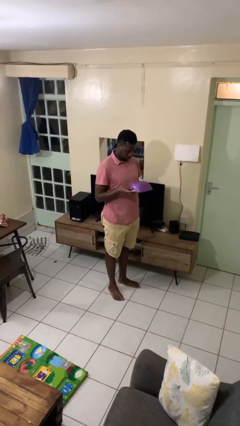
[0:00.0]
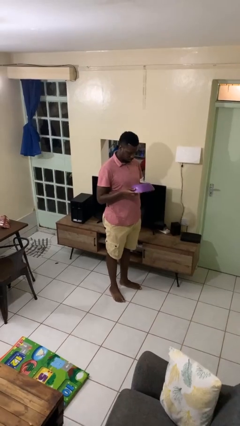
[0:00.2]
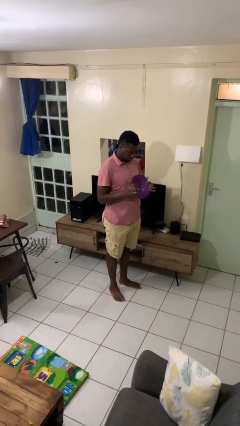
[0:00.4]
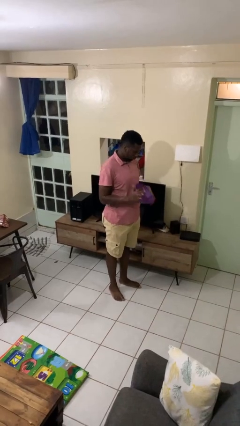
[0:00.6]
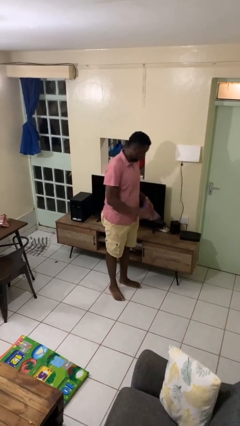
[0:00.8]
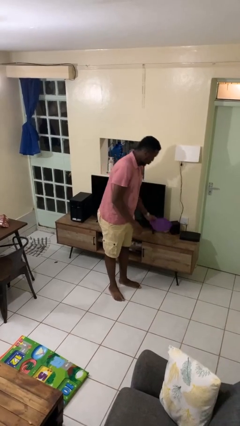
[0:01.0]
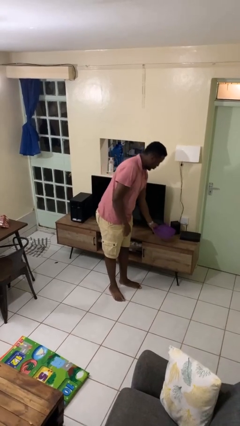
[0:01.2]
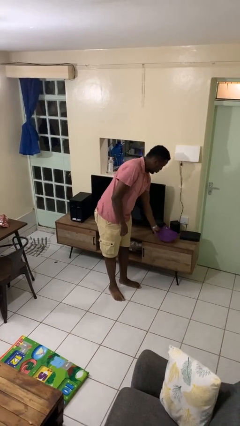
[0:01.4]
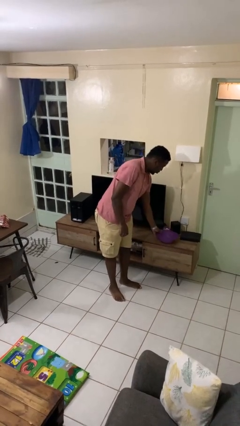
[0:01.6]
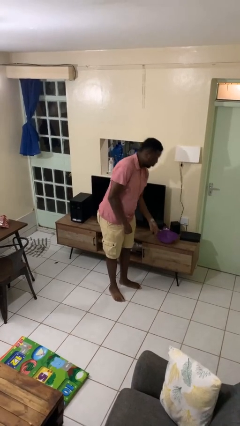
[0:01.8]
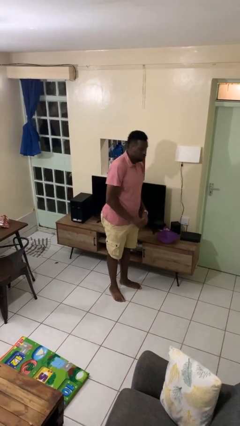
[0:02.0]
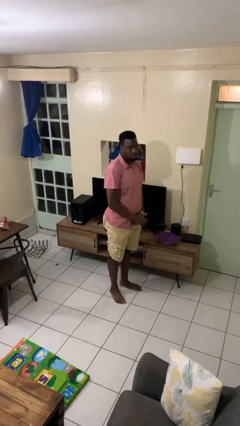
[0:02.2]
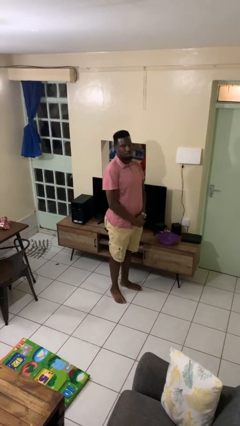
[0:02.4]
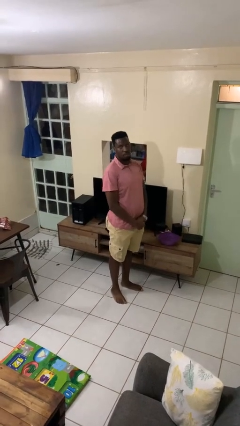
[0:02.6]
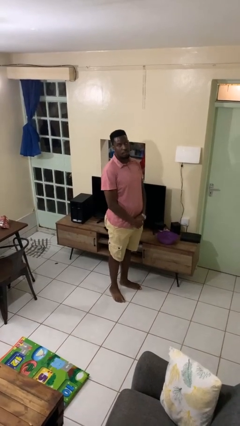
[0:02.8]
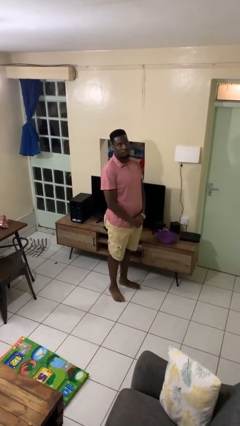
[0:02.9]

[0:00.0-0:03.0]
person puts down object on countertop

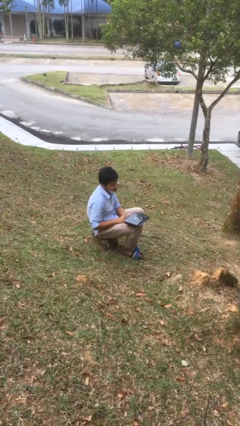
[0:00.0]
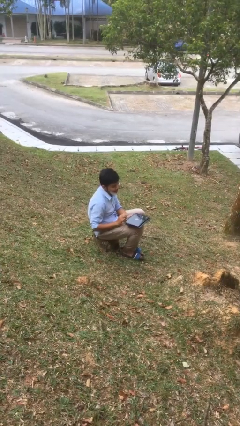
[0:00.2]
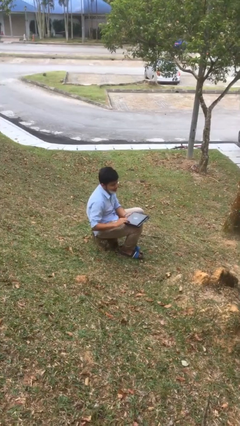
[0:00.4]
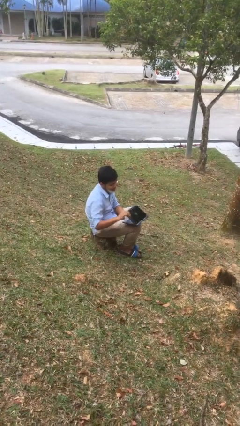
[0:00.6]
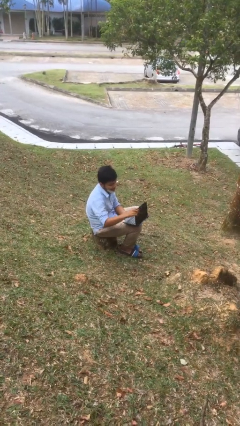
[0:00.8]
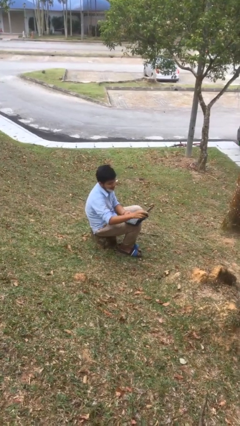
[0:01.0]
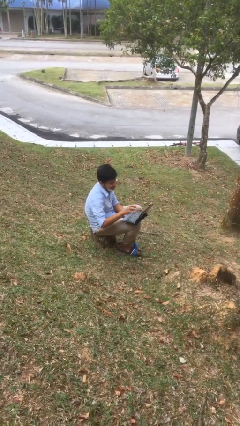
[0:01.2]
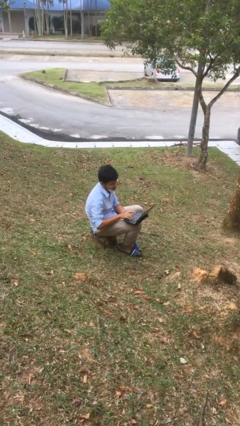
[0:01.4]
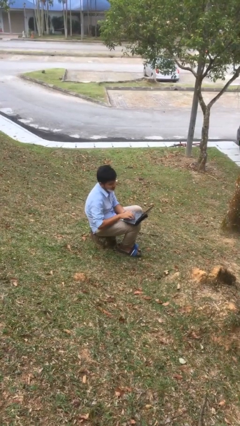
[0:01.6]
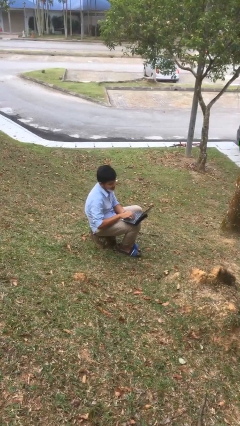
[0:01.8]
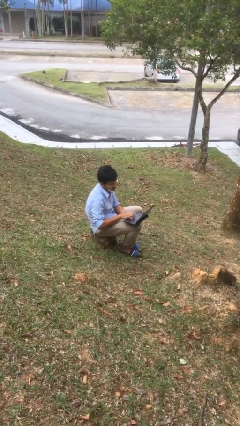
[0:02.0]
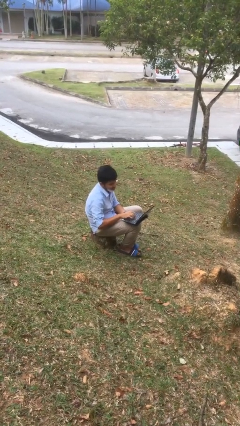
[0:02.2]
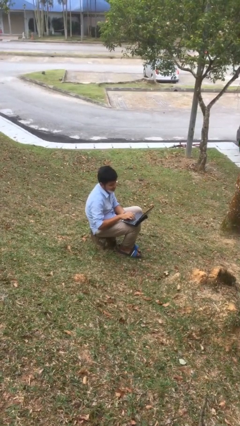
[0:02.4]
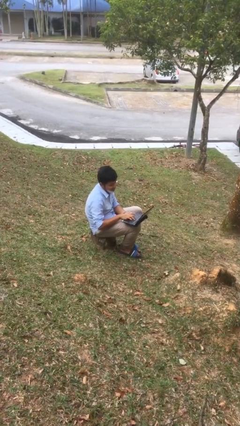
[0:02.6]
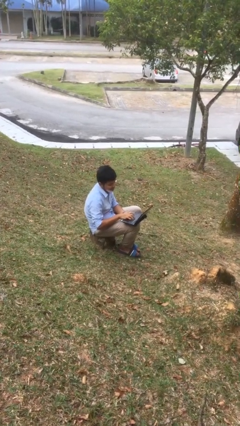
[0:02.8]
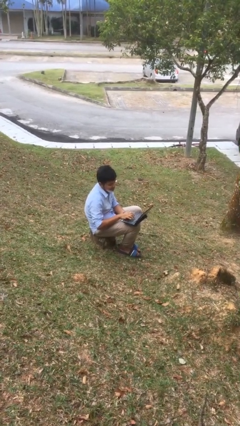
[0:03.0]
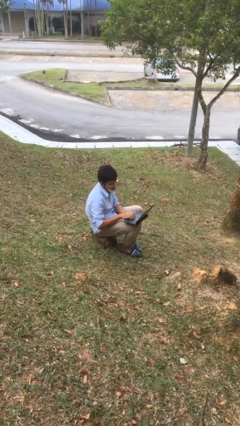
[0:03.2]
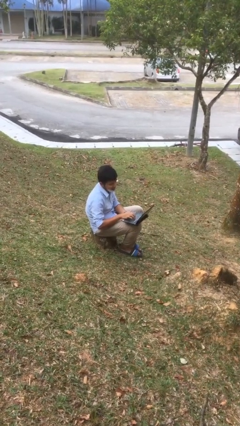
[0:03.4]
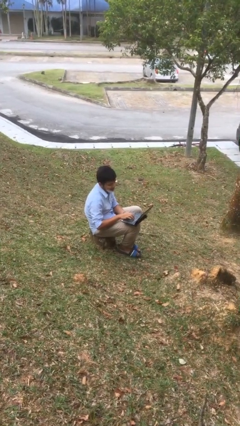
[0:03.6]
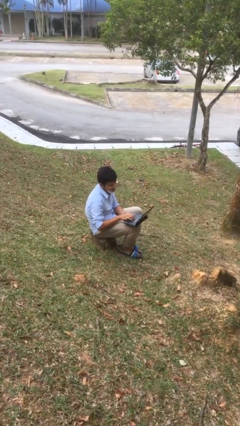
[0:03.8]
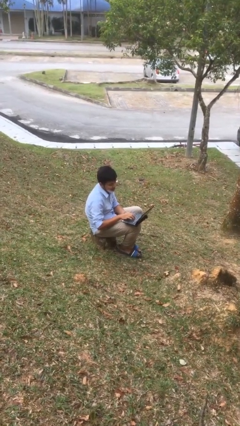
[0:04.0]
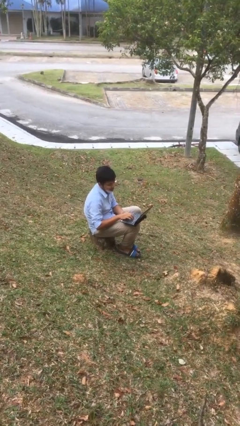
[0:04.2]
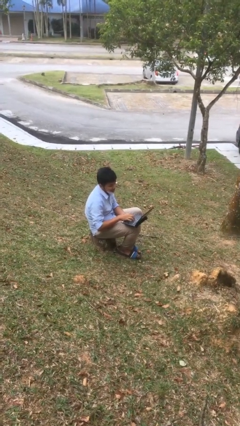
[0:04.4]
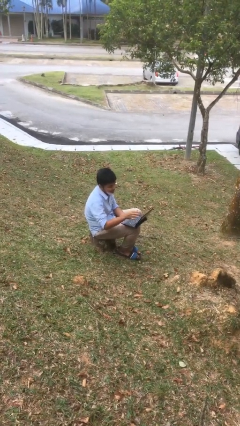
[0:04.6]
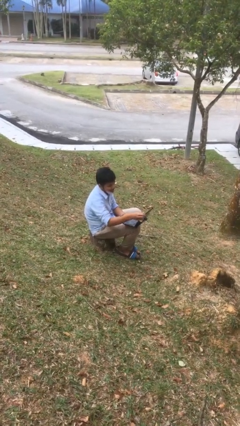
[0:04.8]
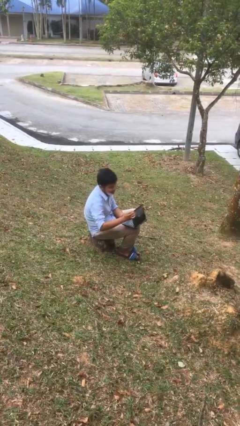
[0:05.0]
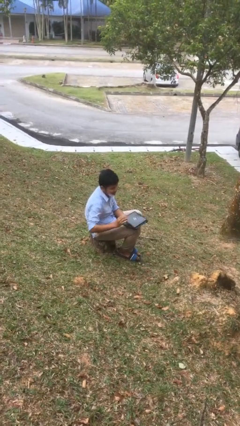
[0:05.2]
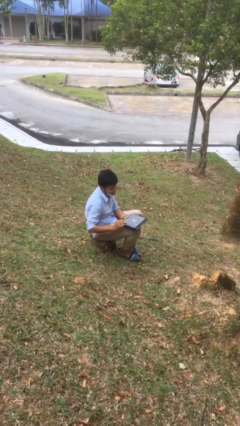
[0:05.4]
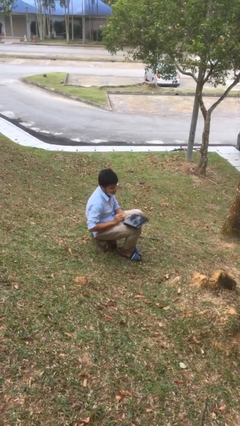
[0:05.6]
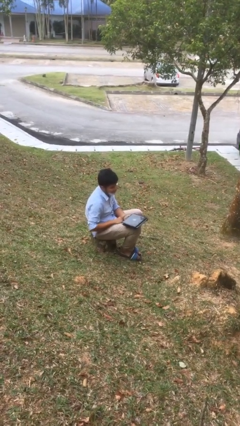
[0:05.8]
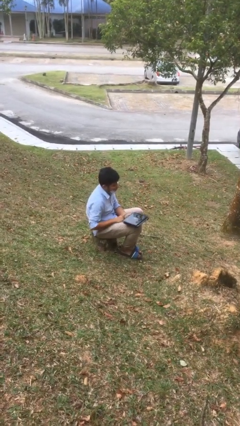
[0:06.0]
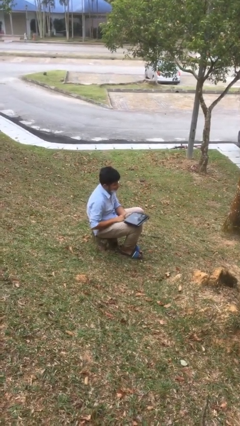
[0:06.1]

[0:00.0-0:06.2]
person interacts with laptop

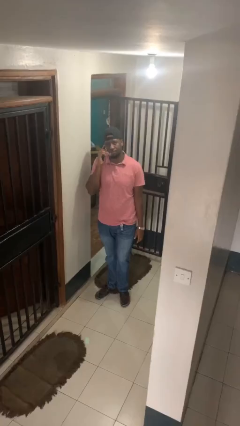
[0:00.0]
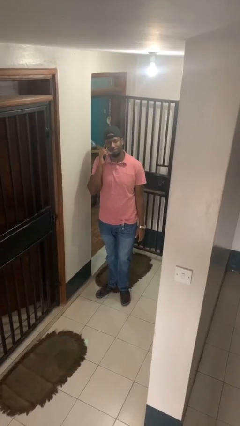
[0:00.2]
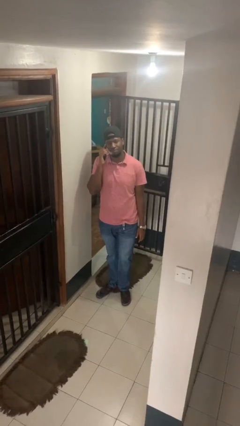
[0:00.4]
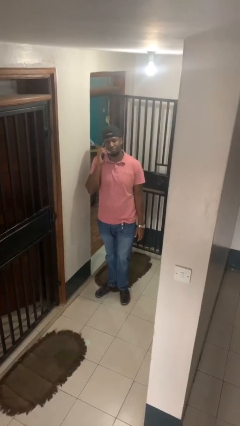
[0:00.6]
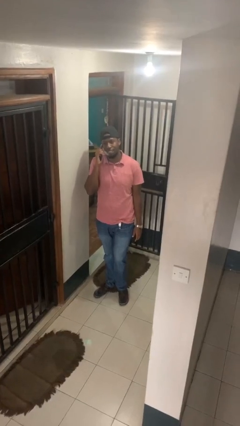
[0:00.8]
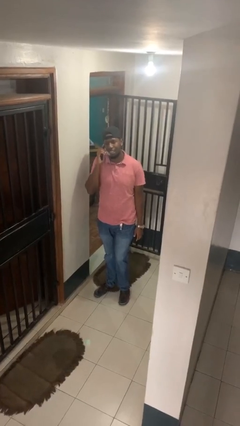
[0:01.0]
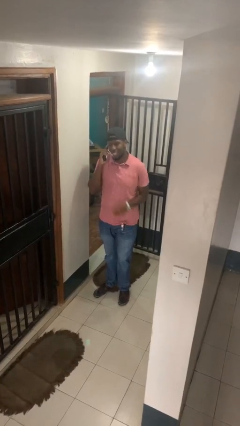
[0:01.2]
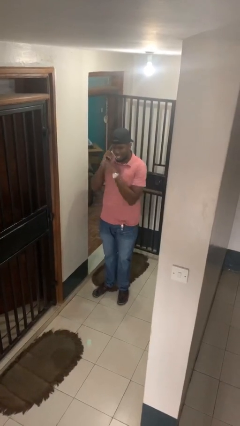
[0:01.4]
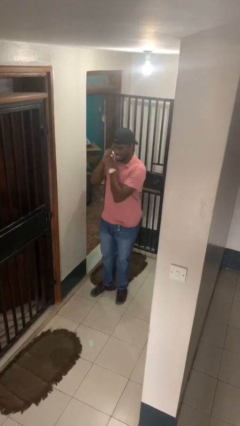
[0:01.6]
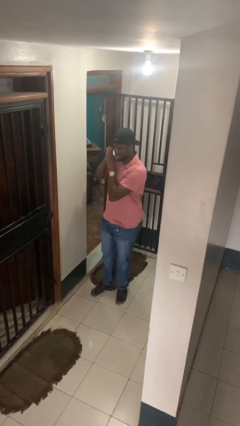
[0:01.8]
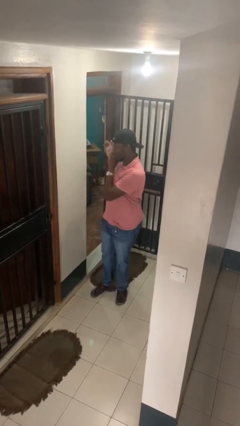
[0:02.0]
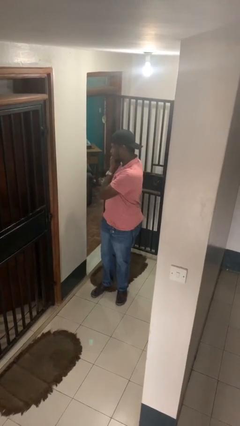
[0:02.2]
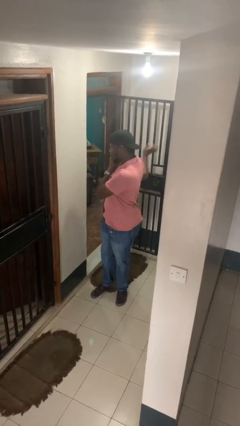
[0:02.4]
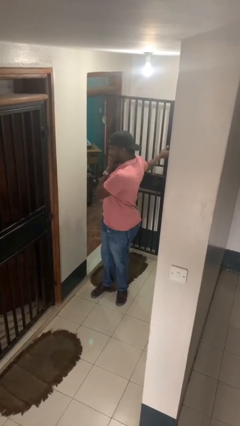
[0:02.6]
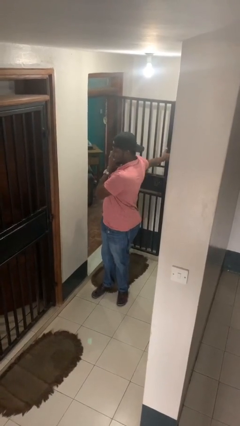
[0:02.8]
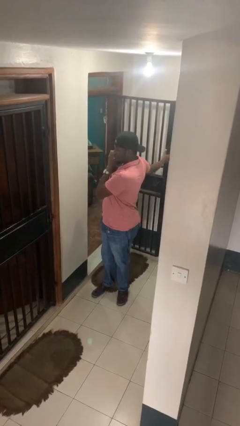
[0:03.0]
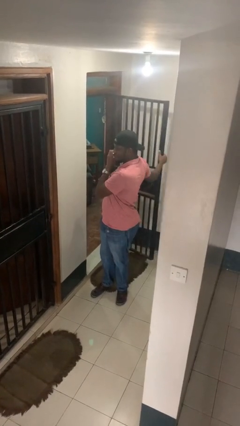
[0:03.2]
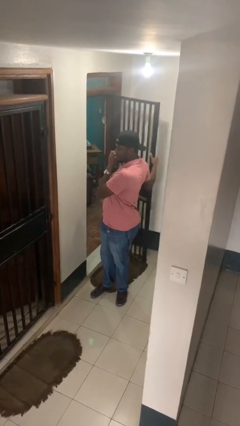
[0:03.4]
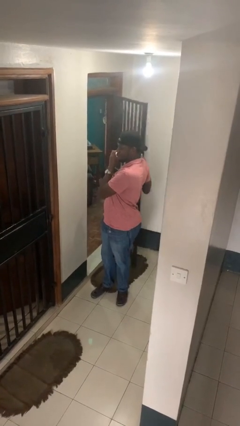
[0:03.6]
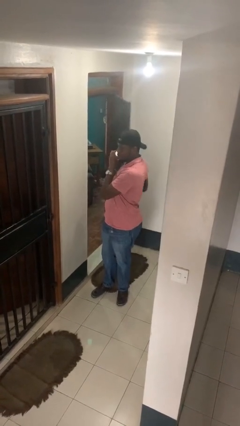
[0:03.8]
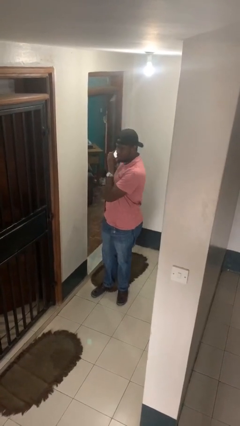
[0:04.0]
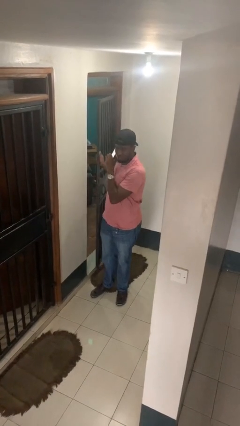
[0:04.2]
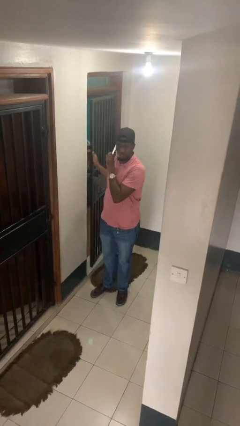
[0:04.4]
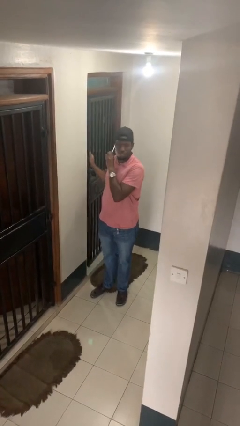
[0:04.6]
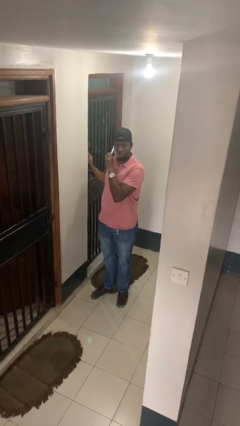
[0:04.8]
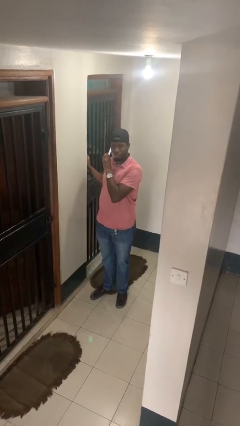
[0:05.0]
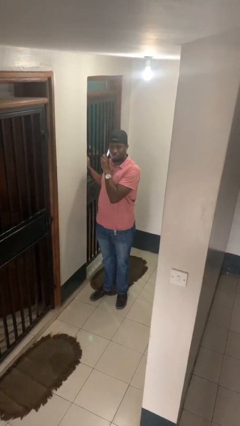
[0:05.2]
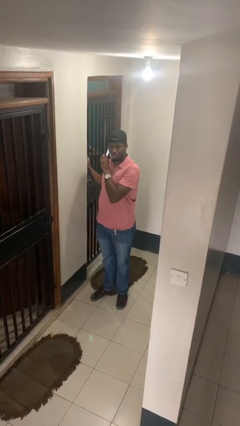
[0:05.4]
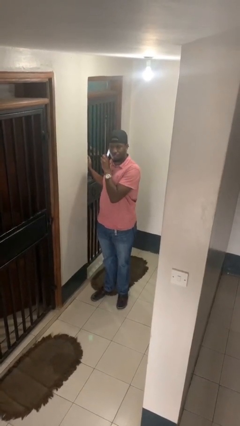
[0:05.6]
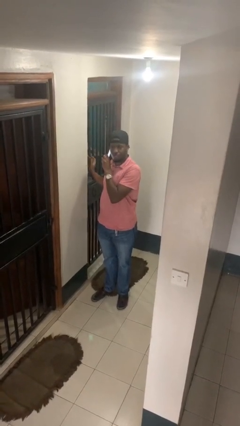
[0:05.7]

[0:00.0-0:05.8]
person closes facility door

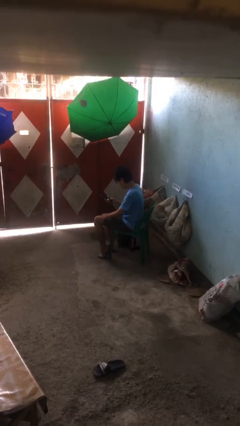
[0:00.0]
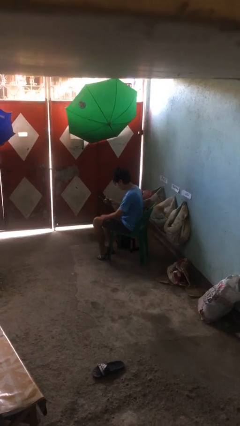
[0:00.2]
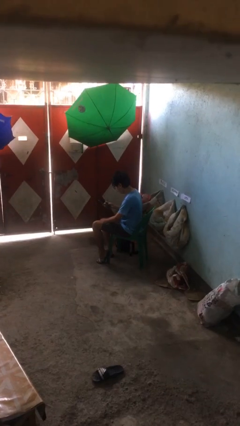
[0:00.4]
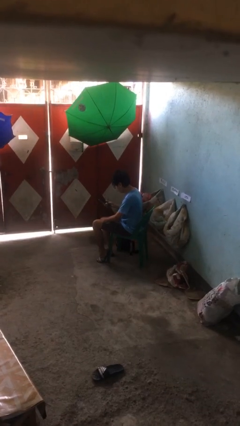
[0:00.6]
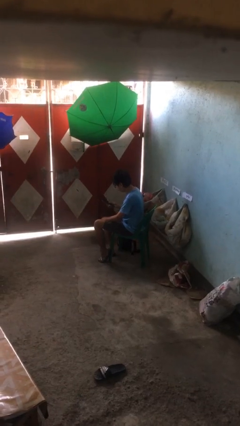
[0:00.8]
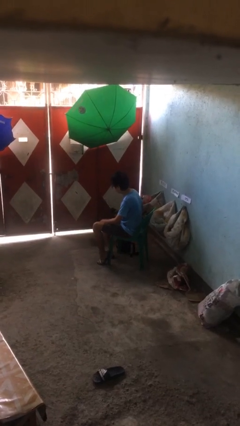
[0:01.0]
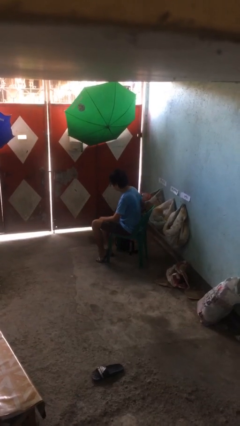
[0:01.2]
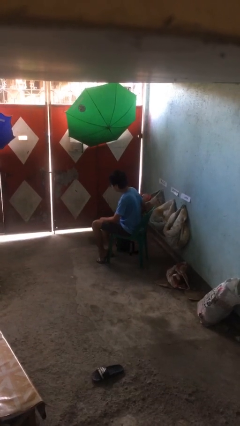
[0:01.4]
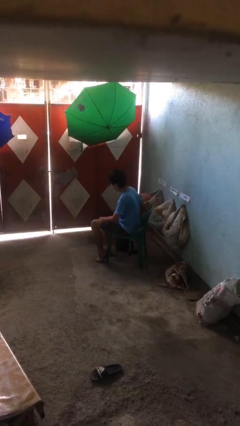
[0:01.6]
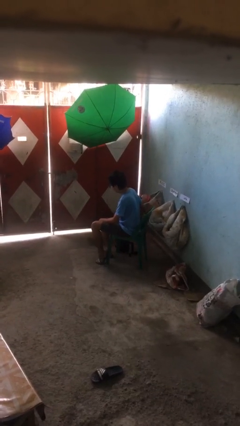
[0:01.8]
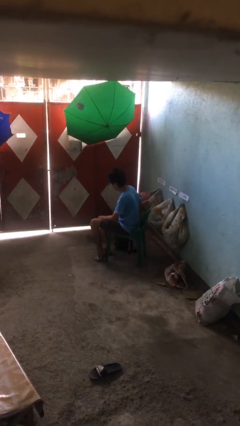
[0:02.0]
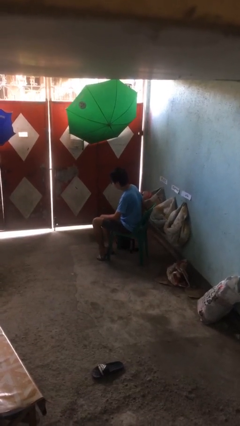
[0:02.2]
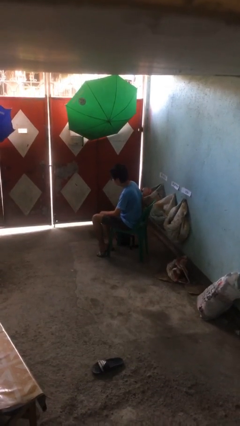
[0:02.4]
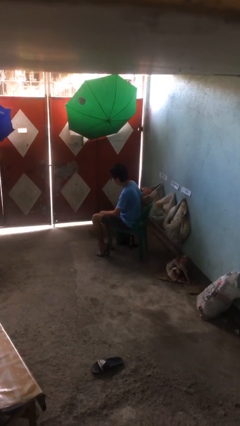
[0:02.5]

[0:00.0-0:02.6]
person puts phone into pocket
